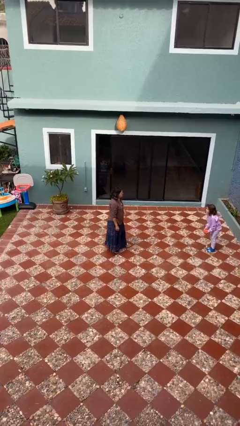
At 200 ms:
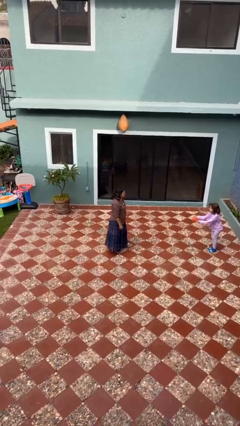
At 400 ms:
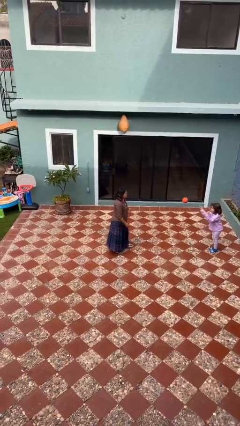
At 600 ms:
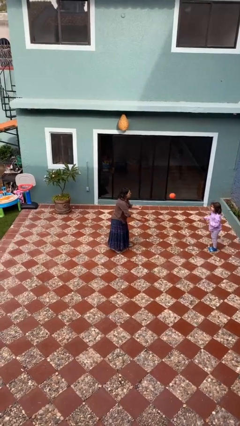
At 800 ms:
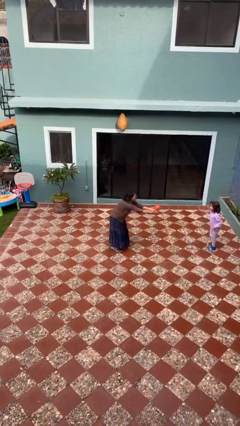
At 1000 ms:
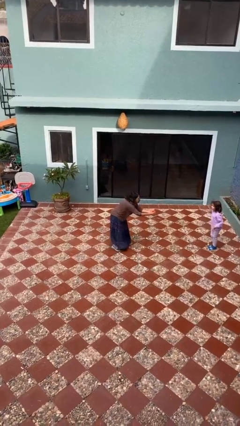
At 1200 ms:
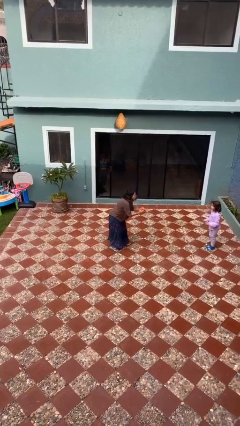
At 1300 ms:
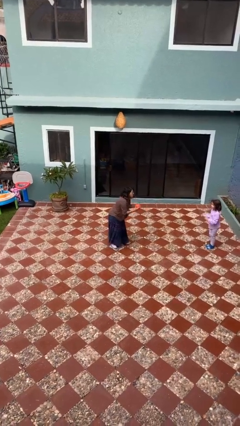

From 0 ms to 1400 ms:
person catches object from person

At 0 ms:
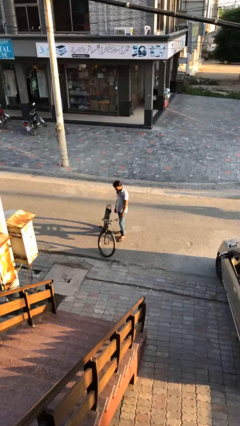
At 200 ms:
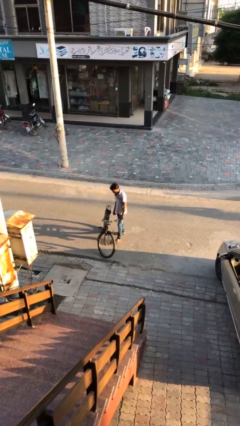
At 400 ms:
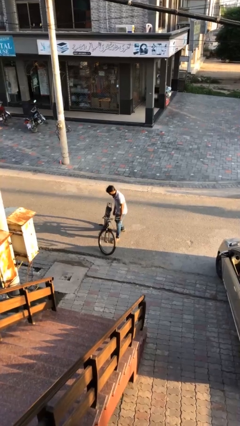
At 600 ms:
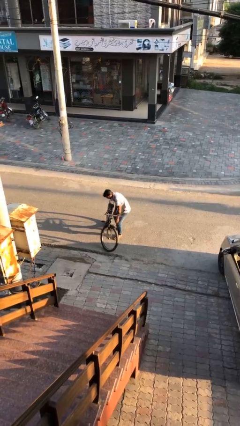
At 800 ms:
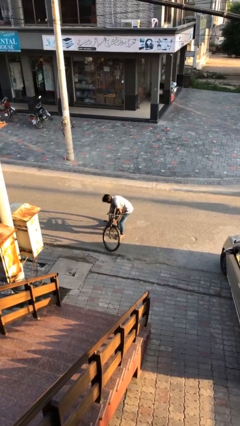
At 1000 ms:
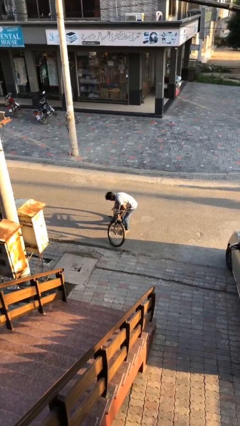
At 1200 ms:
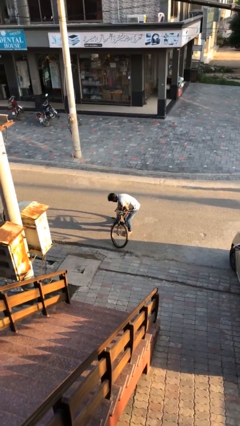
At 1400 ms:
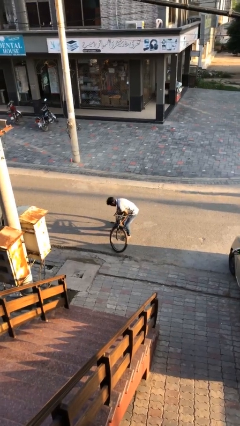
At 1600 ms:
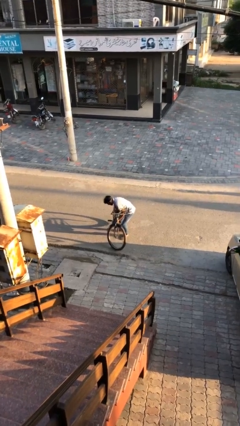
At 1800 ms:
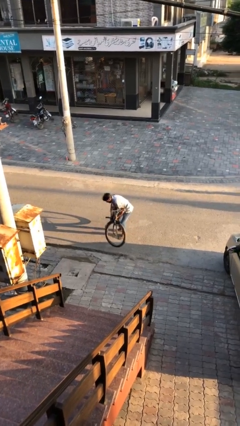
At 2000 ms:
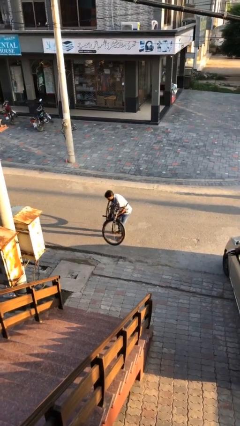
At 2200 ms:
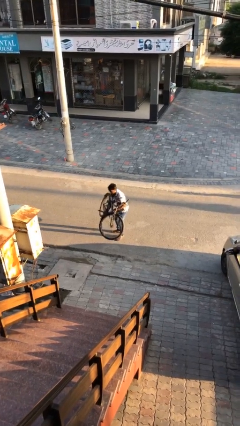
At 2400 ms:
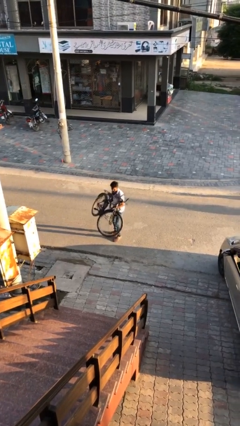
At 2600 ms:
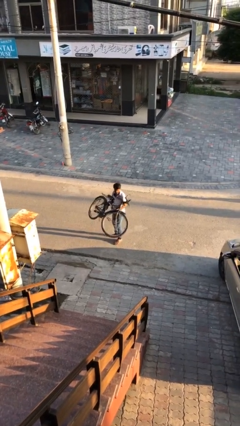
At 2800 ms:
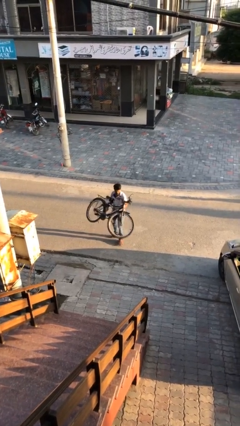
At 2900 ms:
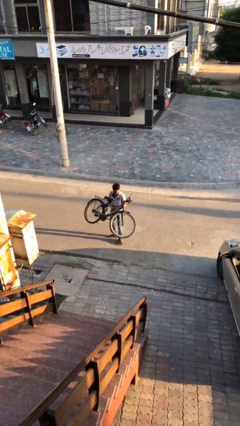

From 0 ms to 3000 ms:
person picks up object from floor

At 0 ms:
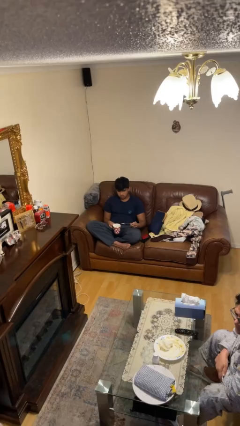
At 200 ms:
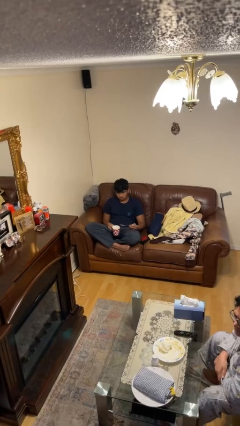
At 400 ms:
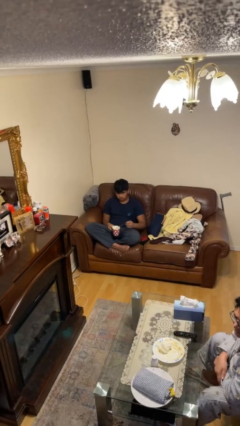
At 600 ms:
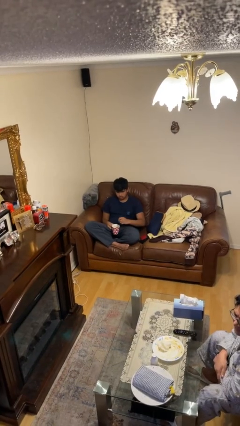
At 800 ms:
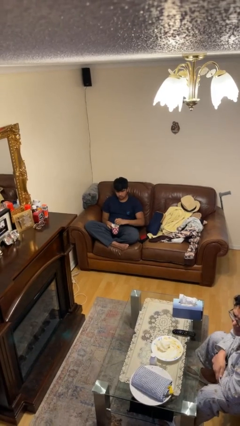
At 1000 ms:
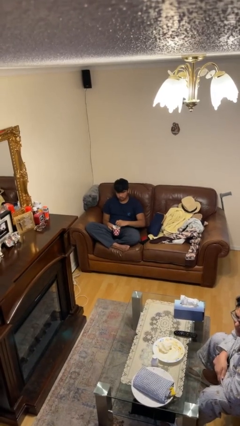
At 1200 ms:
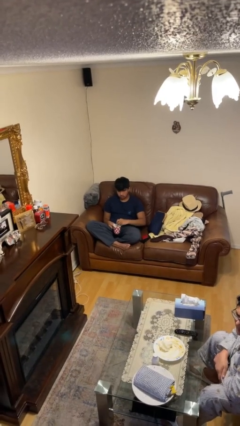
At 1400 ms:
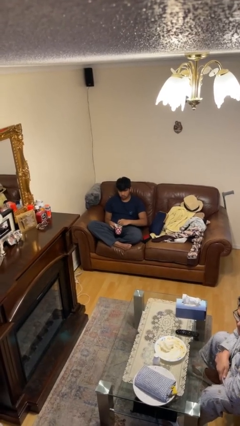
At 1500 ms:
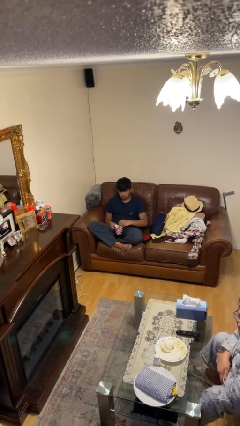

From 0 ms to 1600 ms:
person stirs mug

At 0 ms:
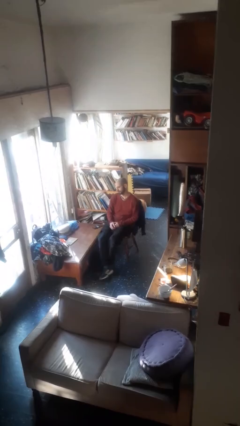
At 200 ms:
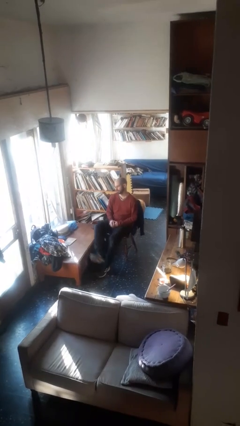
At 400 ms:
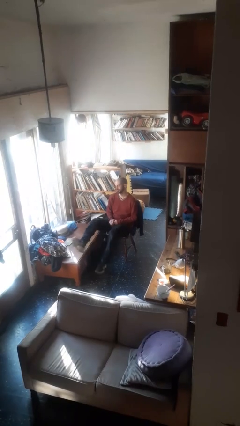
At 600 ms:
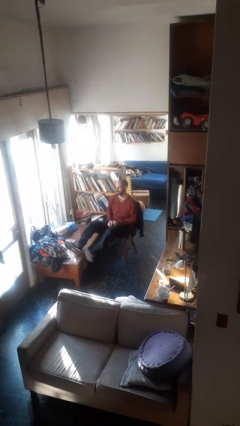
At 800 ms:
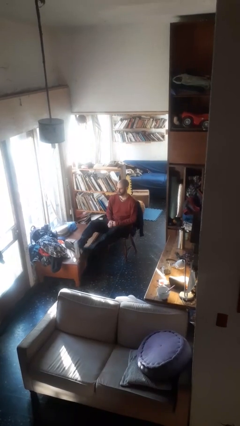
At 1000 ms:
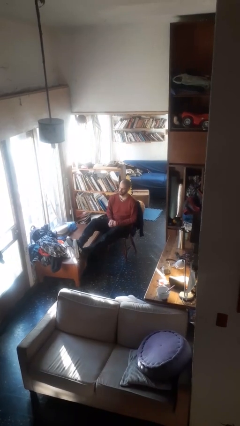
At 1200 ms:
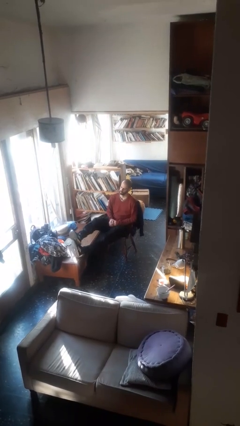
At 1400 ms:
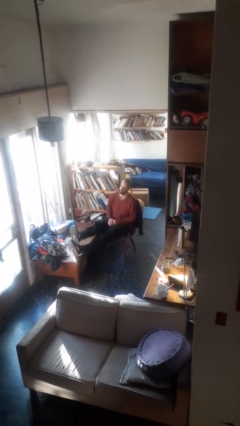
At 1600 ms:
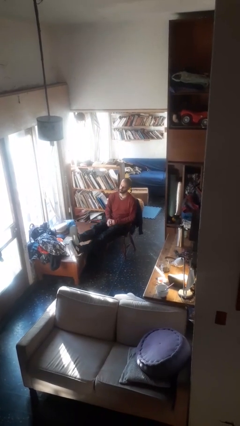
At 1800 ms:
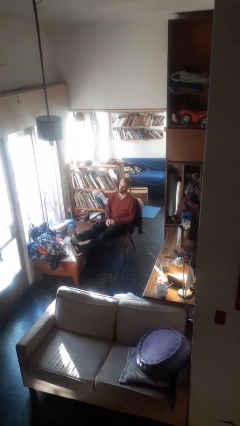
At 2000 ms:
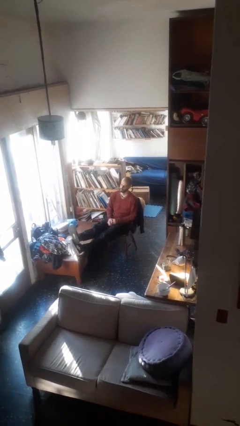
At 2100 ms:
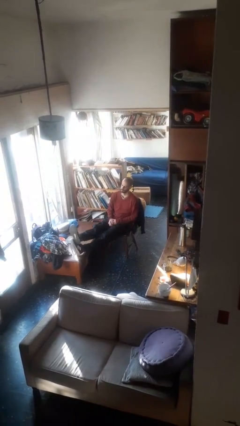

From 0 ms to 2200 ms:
person puts feet up

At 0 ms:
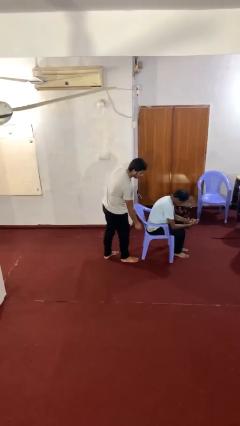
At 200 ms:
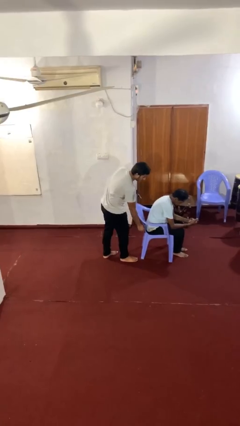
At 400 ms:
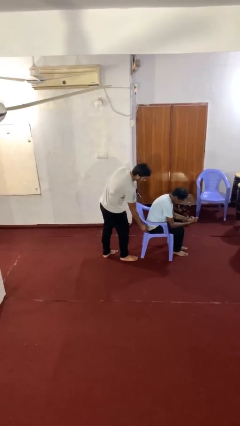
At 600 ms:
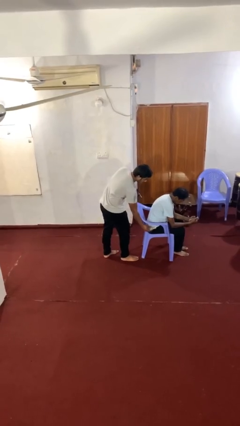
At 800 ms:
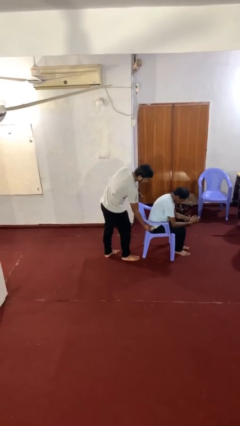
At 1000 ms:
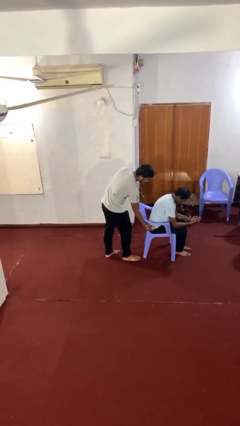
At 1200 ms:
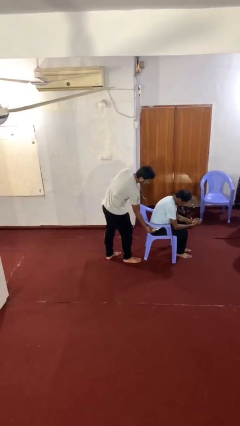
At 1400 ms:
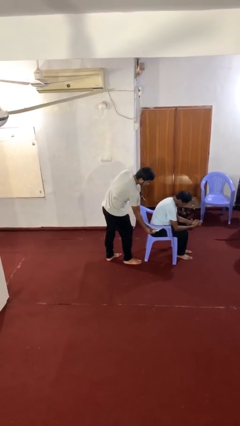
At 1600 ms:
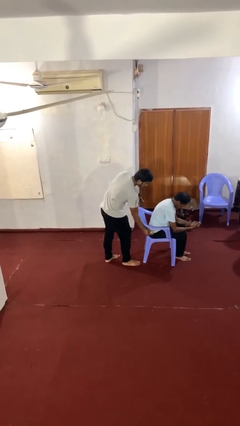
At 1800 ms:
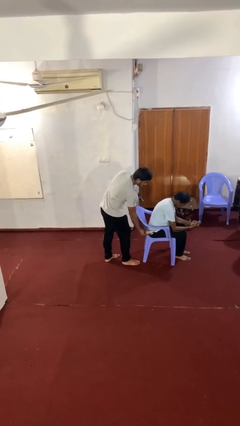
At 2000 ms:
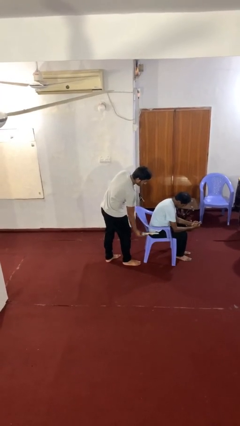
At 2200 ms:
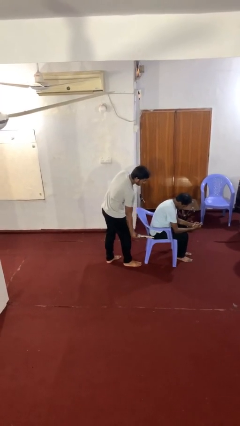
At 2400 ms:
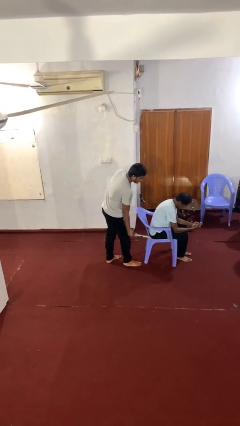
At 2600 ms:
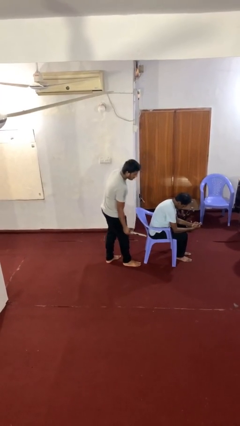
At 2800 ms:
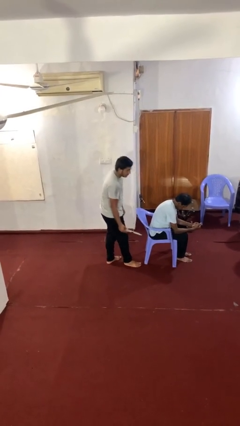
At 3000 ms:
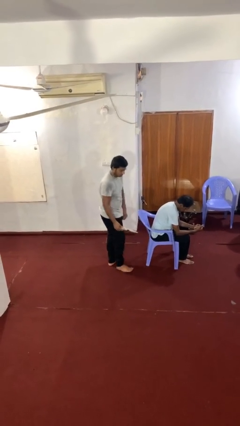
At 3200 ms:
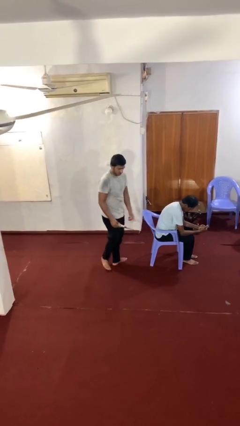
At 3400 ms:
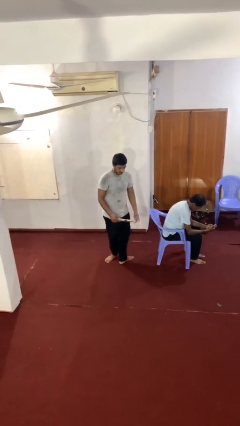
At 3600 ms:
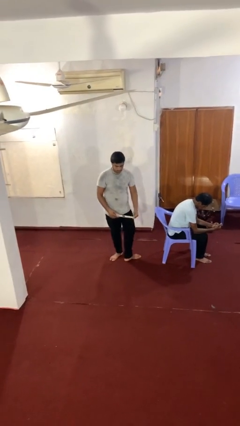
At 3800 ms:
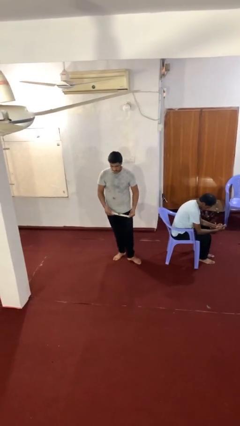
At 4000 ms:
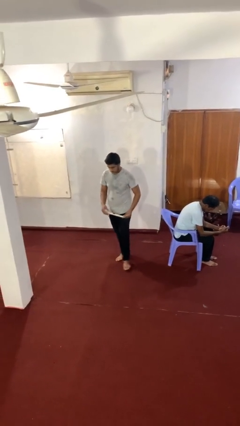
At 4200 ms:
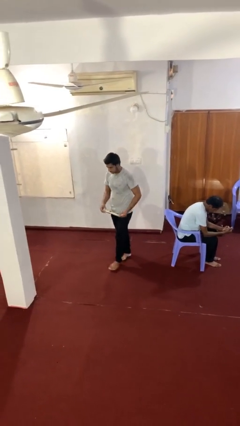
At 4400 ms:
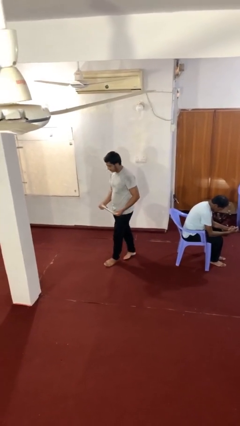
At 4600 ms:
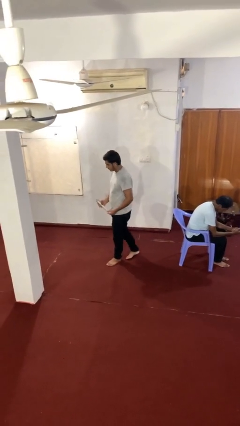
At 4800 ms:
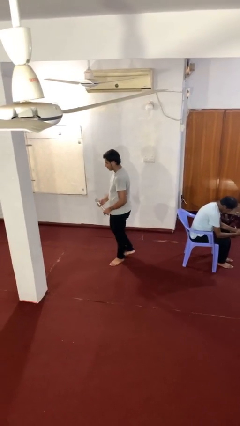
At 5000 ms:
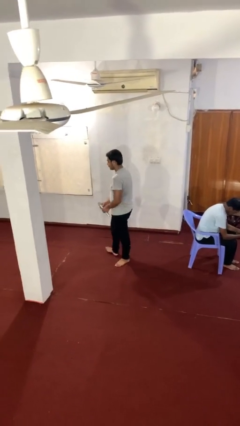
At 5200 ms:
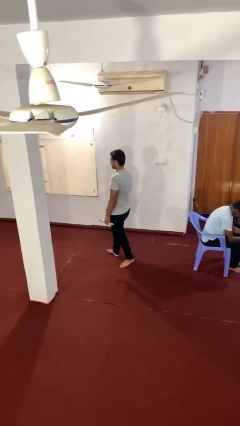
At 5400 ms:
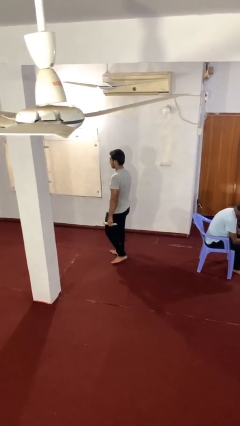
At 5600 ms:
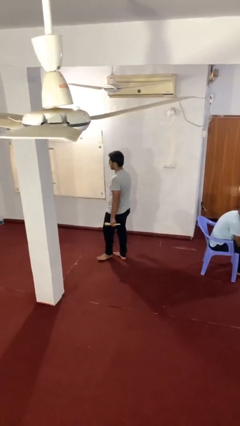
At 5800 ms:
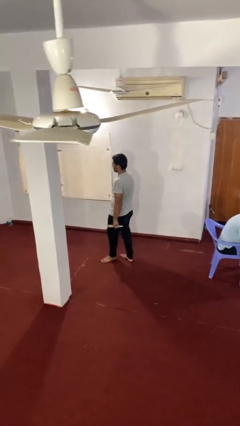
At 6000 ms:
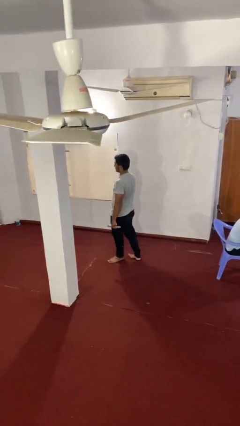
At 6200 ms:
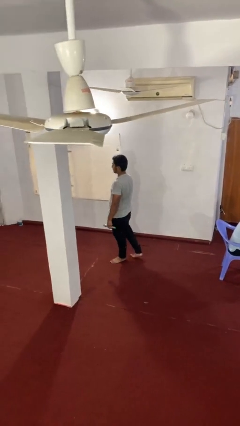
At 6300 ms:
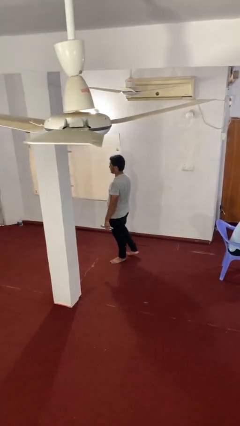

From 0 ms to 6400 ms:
person steals object from person

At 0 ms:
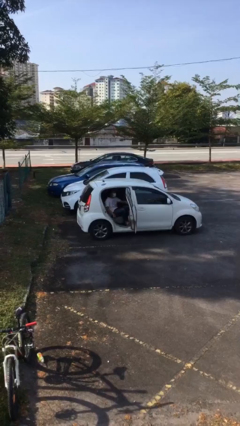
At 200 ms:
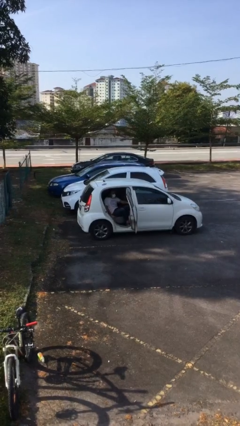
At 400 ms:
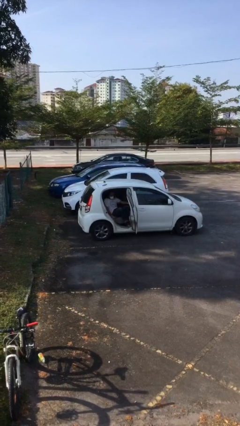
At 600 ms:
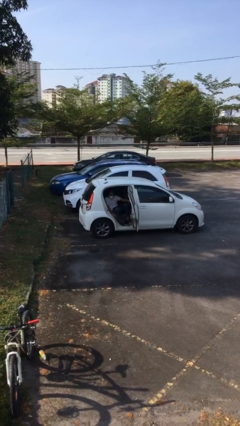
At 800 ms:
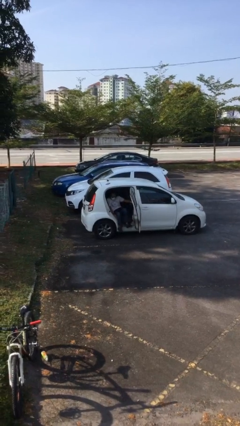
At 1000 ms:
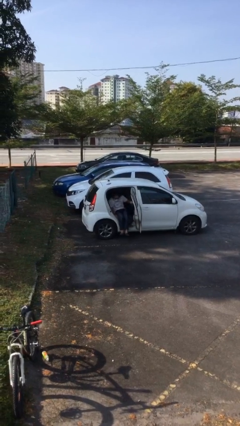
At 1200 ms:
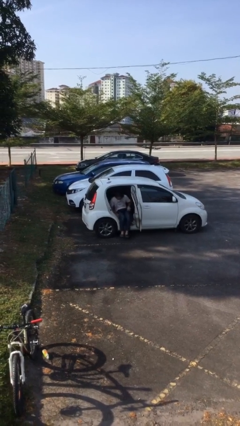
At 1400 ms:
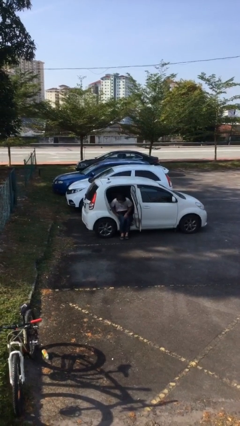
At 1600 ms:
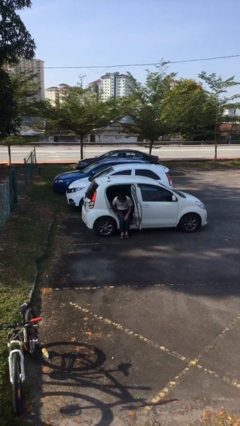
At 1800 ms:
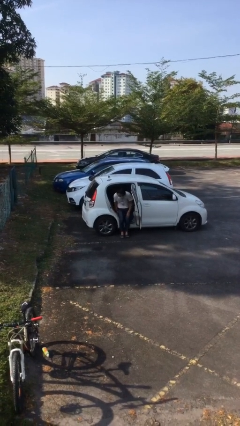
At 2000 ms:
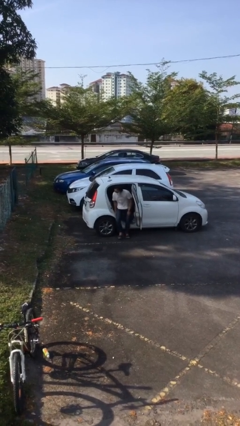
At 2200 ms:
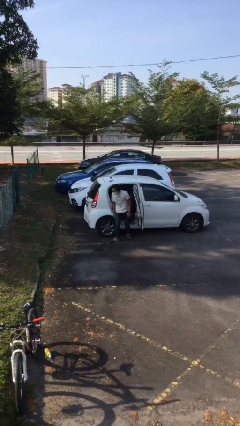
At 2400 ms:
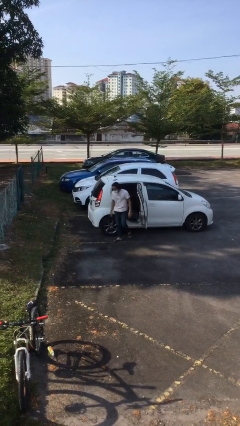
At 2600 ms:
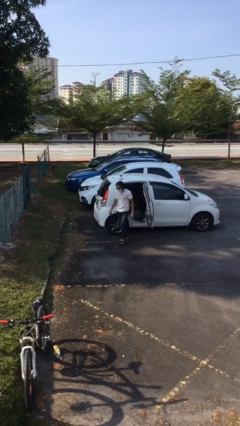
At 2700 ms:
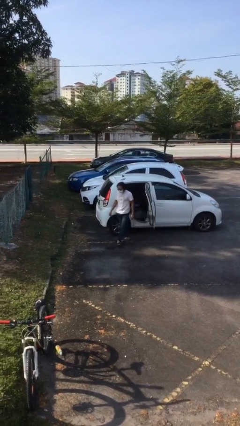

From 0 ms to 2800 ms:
person exits car
